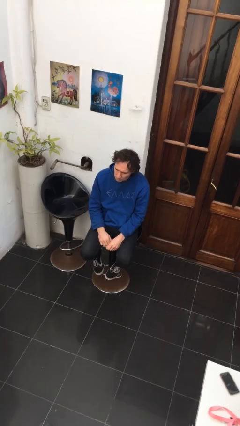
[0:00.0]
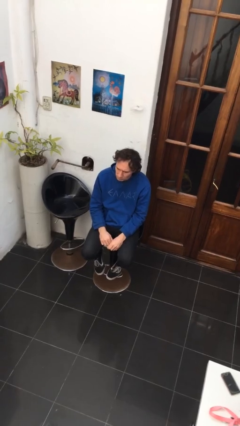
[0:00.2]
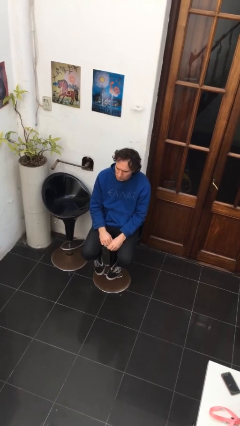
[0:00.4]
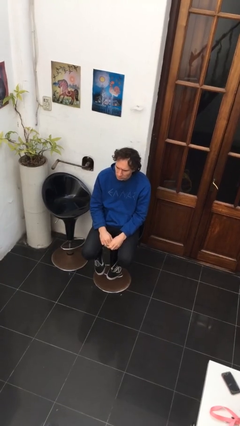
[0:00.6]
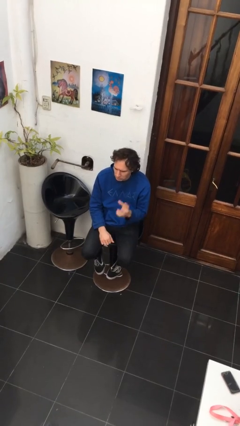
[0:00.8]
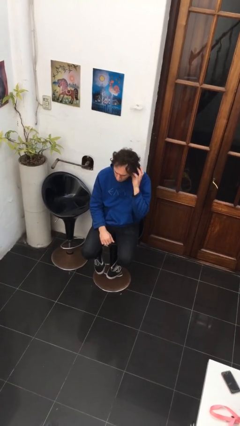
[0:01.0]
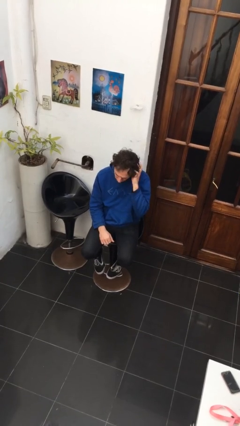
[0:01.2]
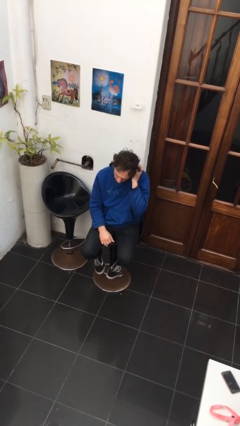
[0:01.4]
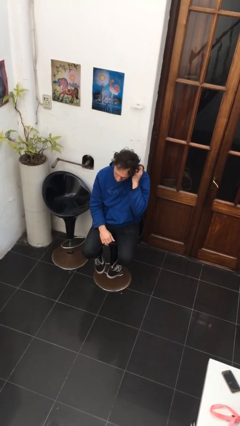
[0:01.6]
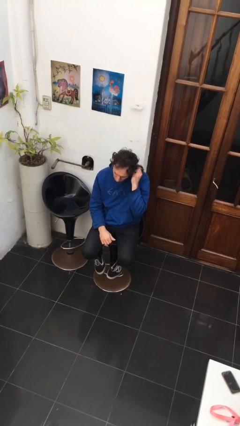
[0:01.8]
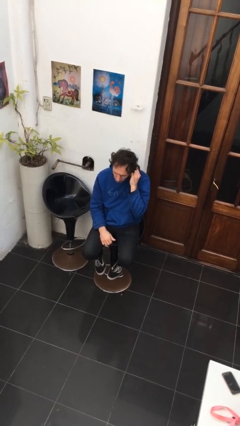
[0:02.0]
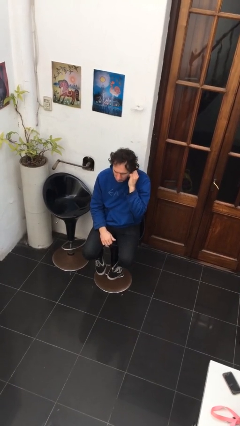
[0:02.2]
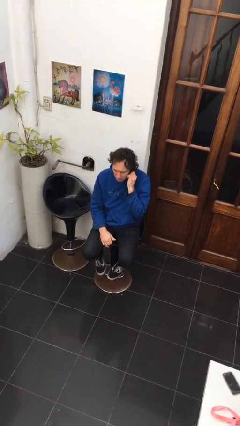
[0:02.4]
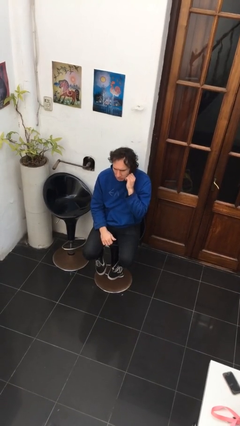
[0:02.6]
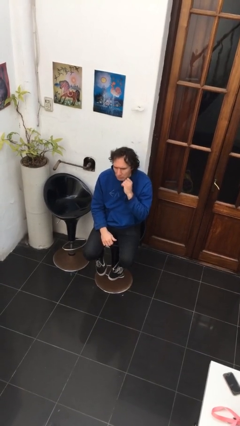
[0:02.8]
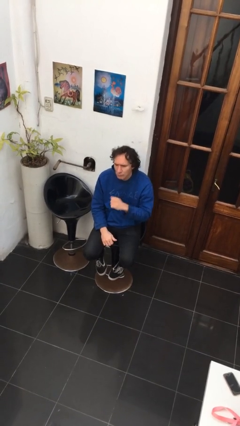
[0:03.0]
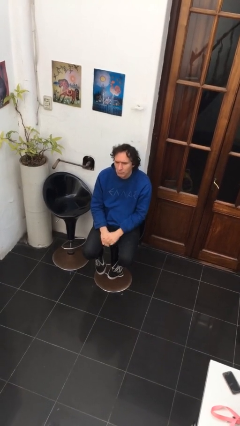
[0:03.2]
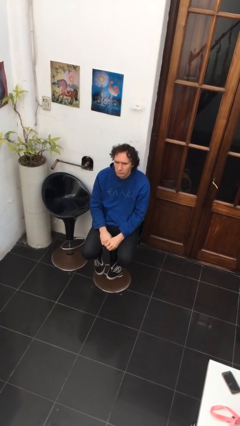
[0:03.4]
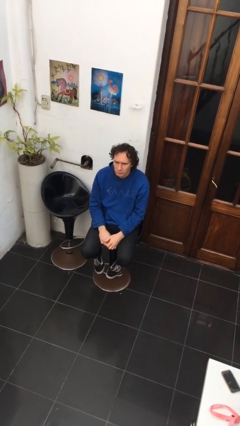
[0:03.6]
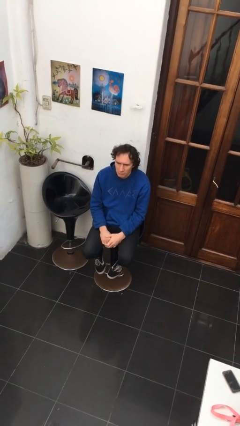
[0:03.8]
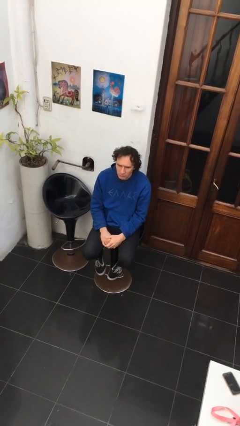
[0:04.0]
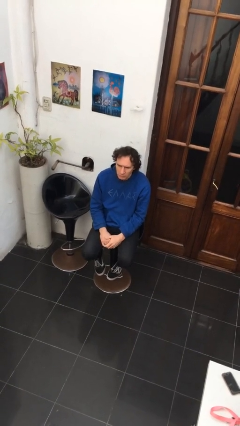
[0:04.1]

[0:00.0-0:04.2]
person strokes hair

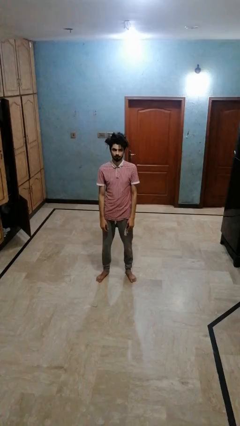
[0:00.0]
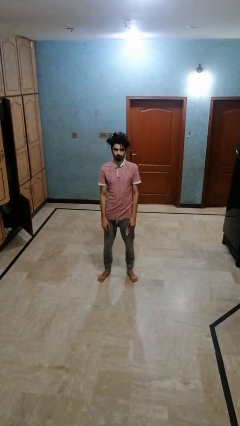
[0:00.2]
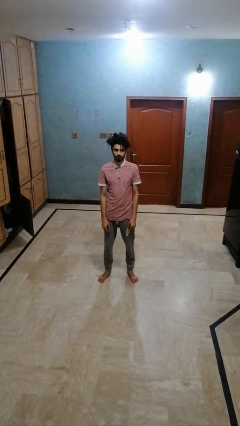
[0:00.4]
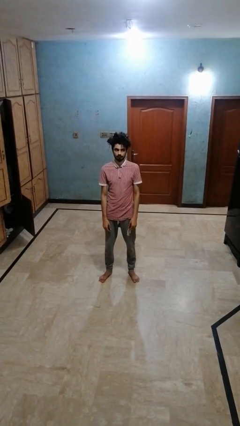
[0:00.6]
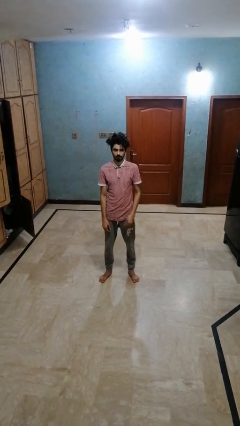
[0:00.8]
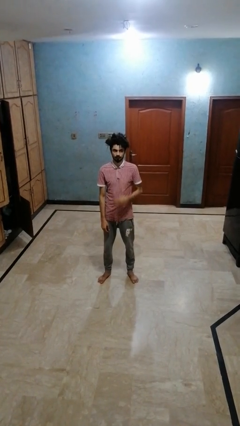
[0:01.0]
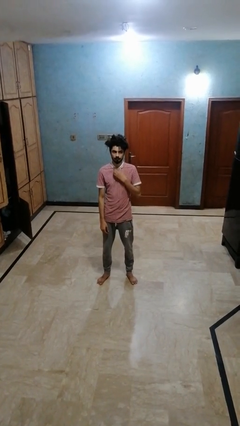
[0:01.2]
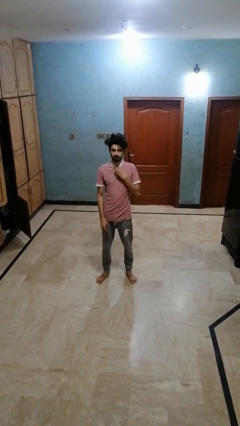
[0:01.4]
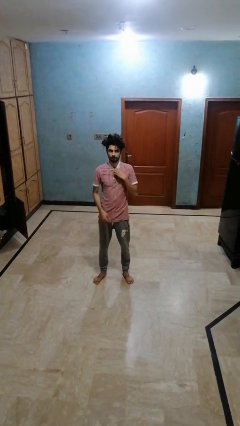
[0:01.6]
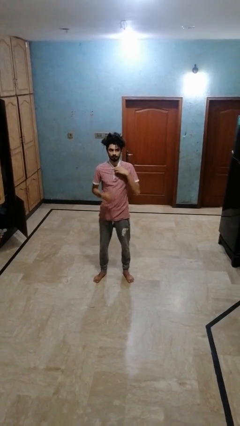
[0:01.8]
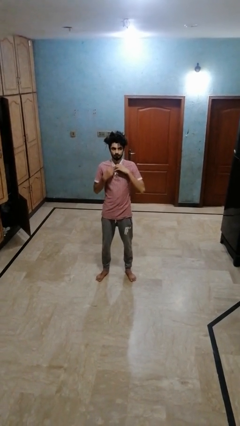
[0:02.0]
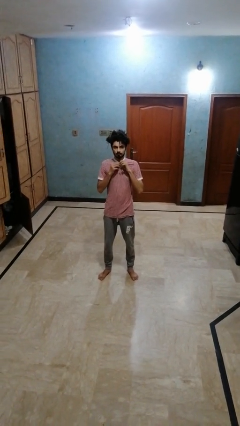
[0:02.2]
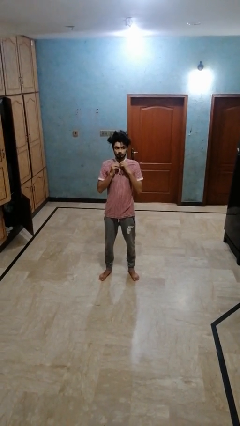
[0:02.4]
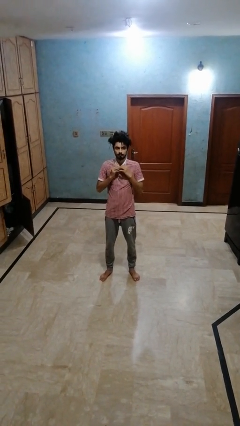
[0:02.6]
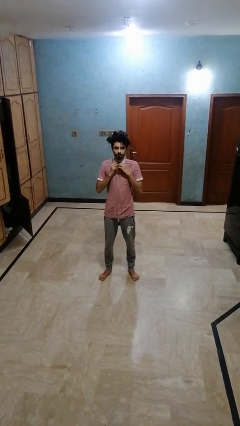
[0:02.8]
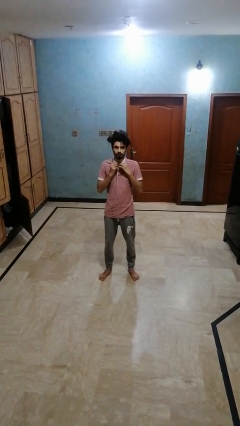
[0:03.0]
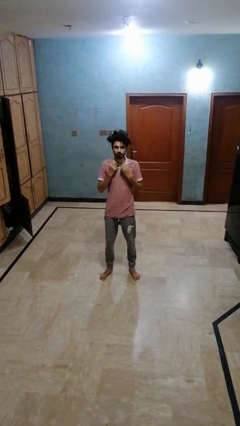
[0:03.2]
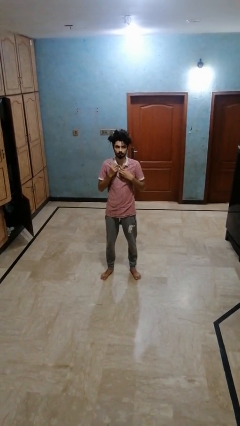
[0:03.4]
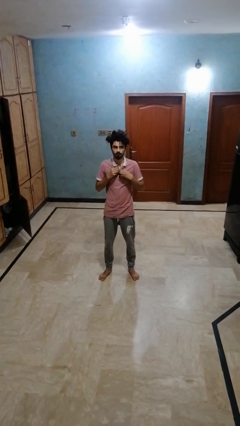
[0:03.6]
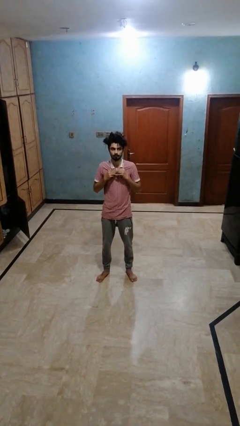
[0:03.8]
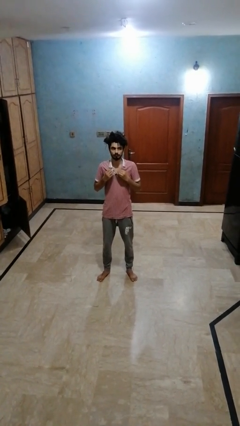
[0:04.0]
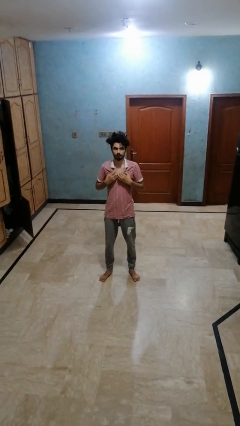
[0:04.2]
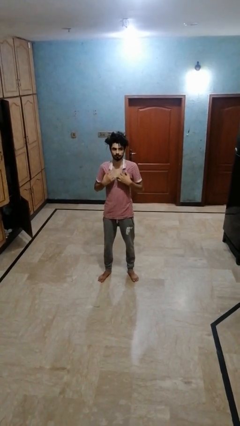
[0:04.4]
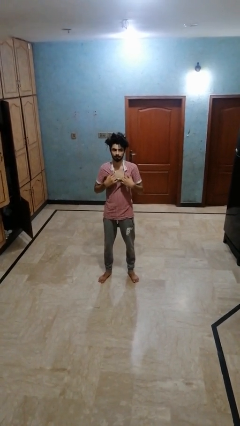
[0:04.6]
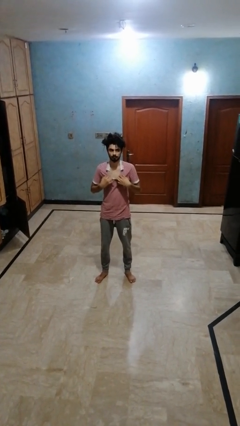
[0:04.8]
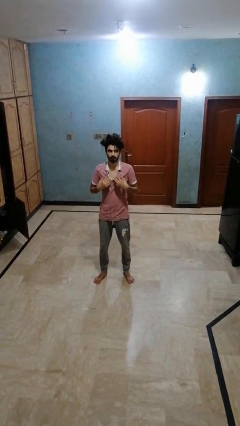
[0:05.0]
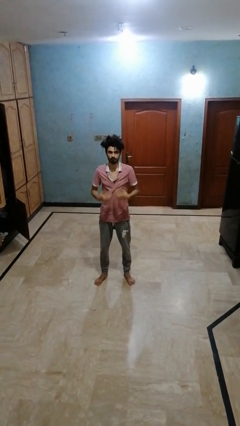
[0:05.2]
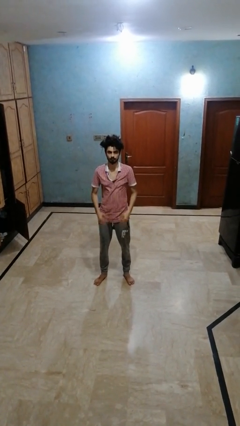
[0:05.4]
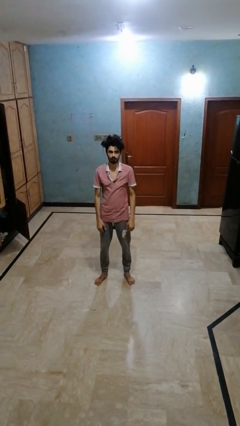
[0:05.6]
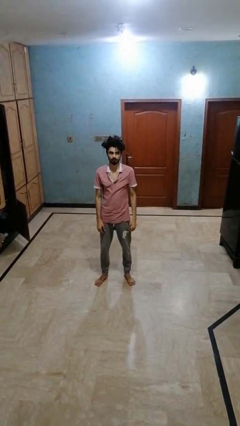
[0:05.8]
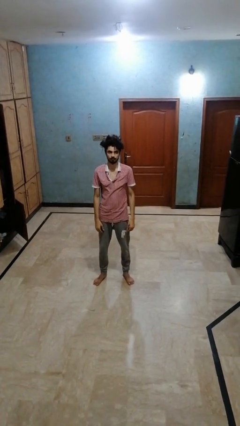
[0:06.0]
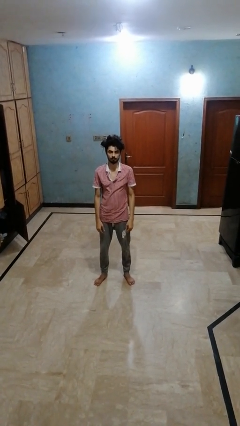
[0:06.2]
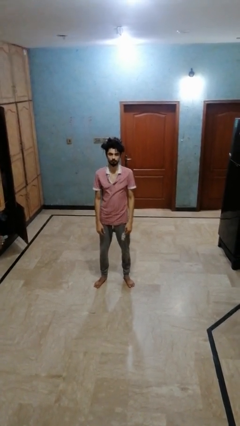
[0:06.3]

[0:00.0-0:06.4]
person unbuttons shirt

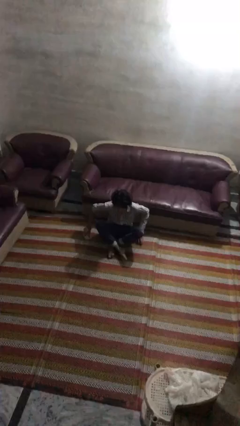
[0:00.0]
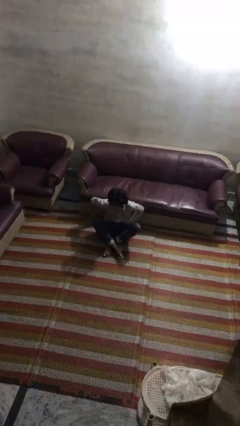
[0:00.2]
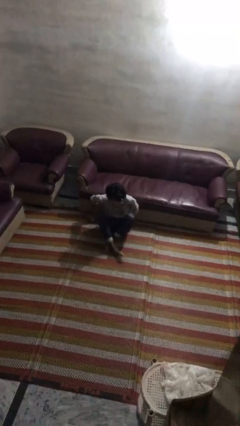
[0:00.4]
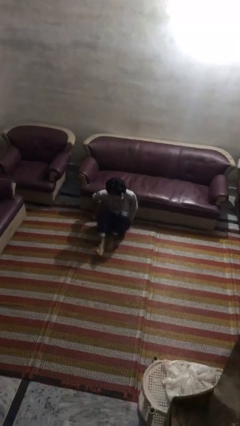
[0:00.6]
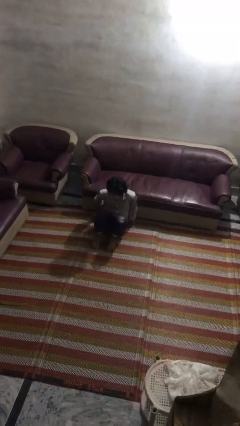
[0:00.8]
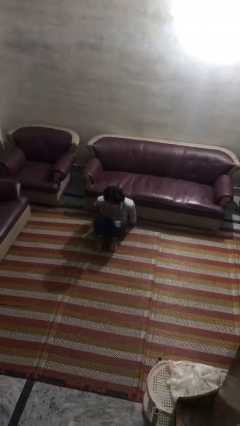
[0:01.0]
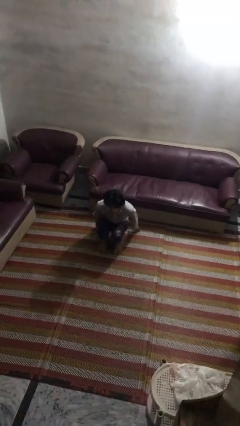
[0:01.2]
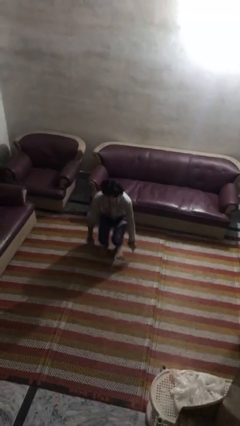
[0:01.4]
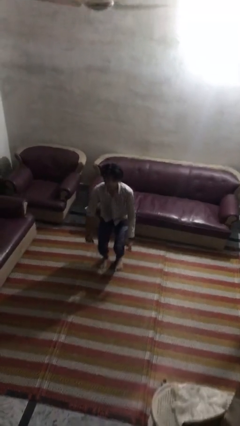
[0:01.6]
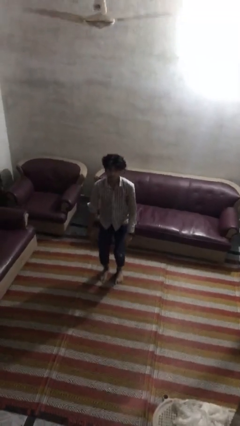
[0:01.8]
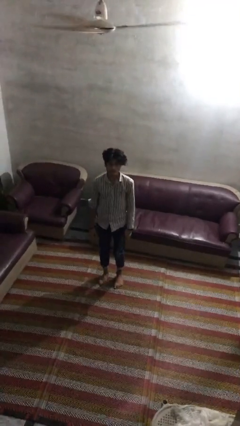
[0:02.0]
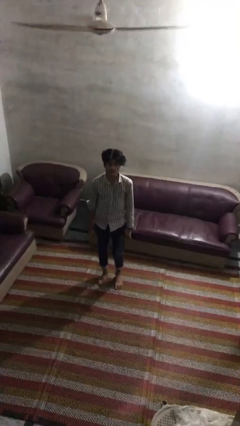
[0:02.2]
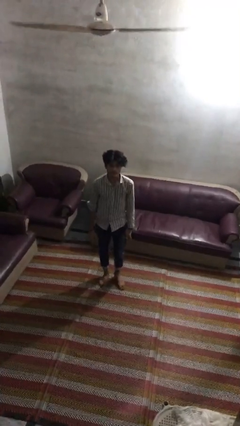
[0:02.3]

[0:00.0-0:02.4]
person stands up from floor

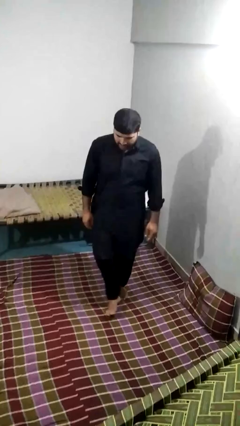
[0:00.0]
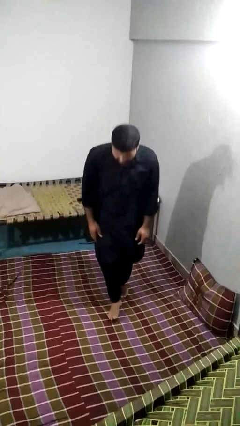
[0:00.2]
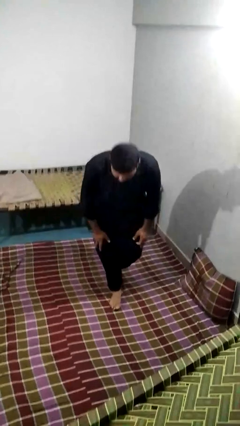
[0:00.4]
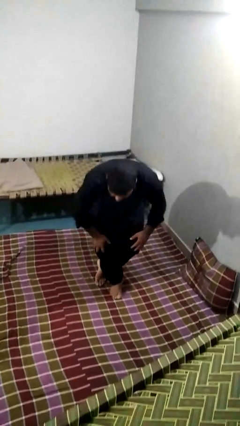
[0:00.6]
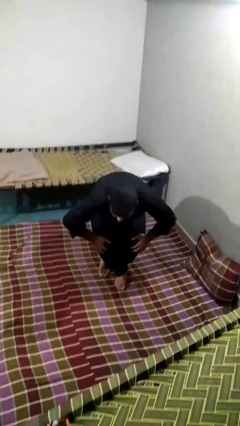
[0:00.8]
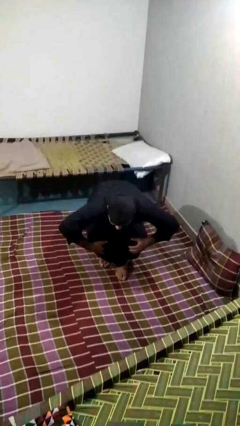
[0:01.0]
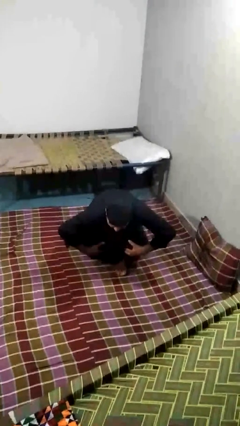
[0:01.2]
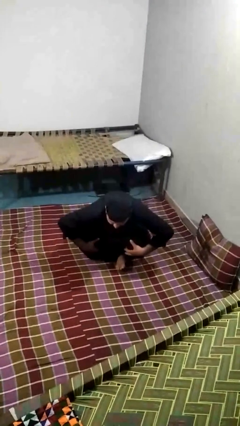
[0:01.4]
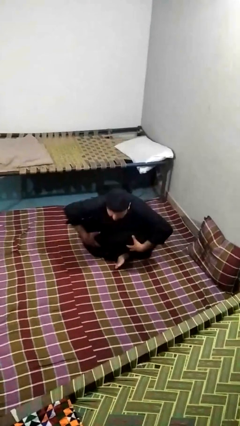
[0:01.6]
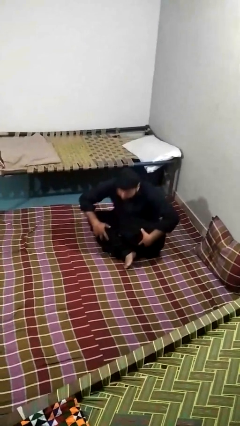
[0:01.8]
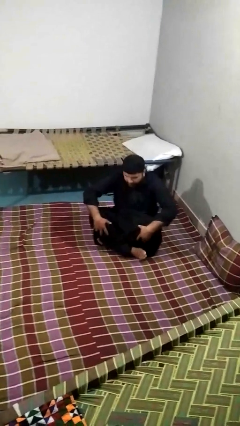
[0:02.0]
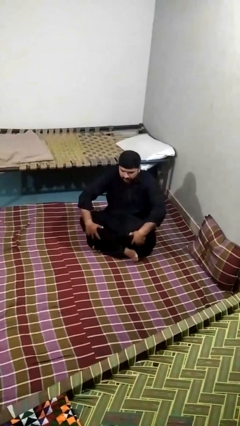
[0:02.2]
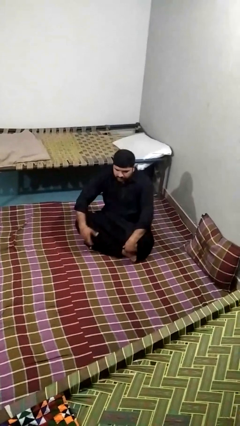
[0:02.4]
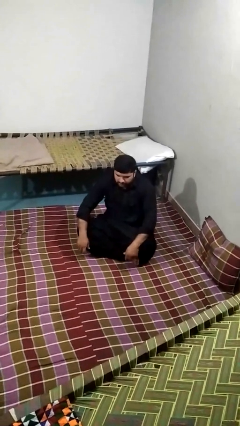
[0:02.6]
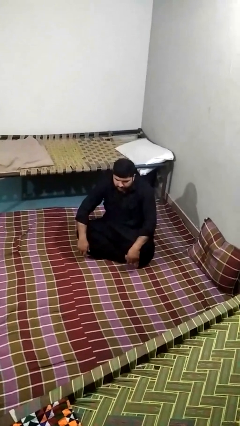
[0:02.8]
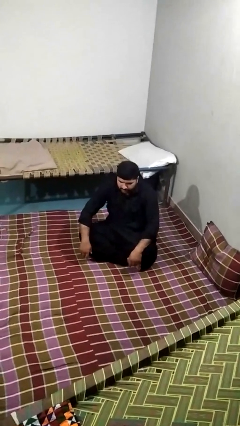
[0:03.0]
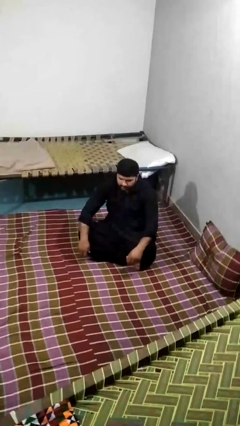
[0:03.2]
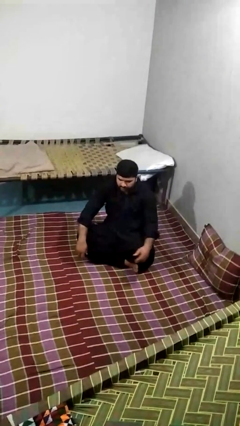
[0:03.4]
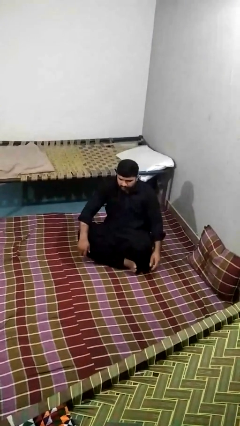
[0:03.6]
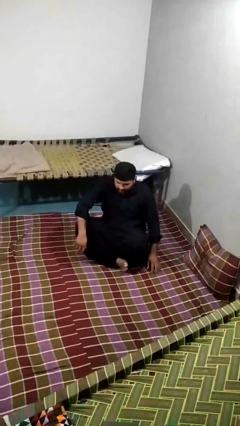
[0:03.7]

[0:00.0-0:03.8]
person sits crisscross

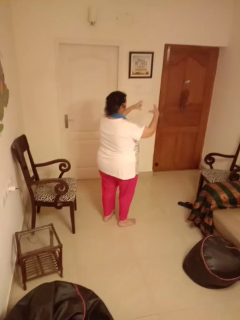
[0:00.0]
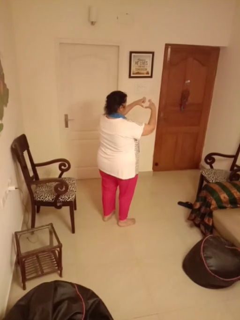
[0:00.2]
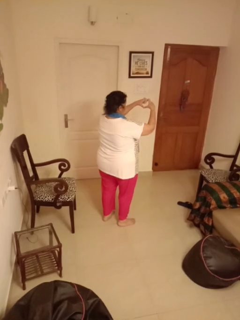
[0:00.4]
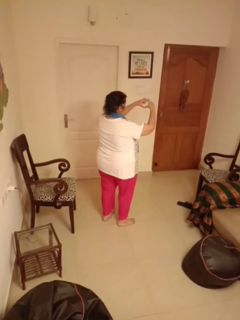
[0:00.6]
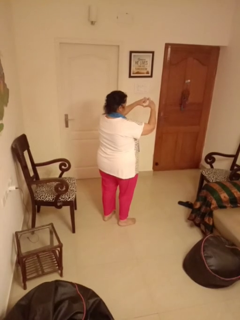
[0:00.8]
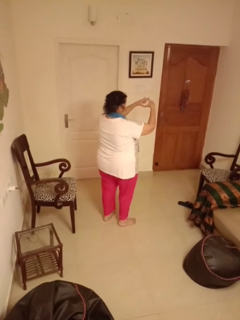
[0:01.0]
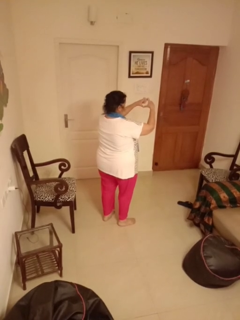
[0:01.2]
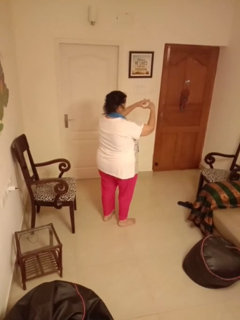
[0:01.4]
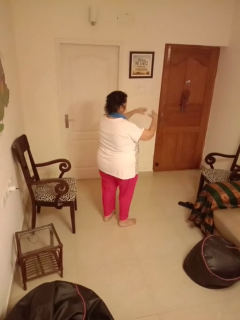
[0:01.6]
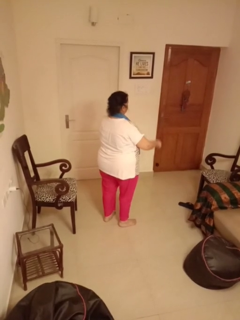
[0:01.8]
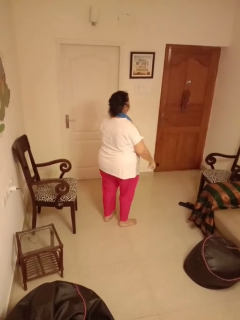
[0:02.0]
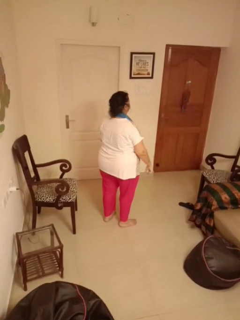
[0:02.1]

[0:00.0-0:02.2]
person gestures heart
